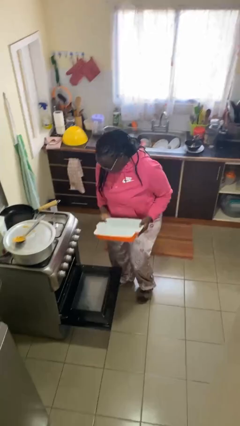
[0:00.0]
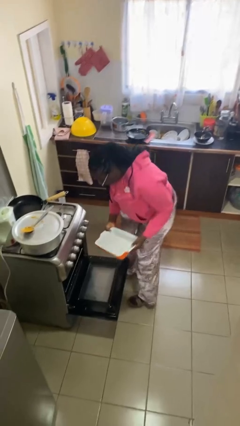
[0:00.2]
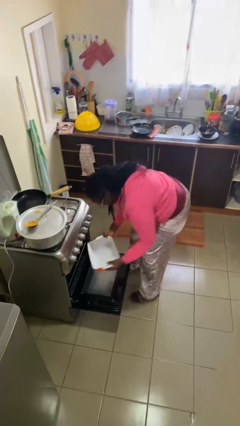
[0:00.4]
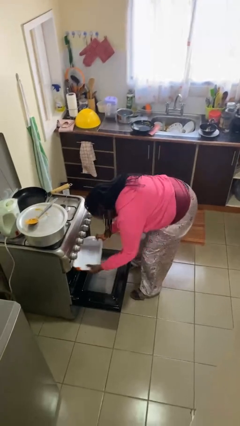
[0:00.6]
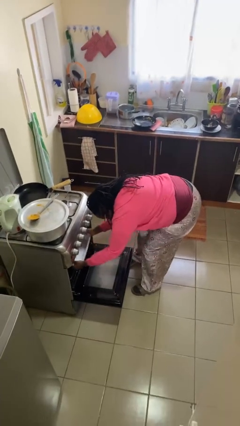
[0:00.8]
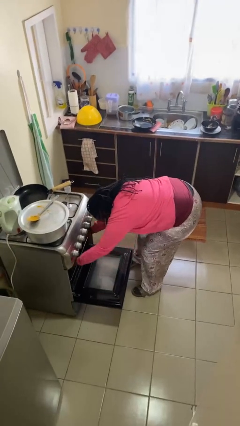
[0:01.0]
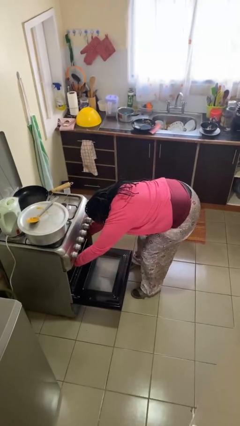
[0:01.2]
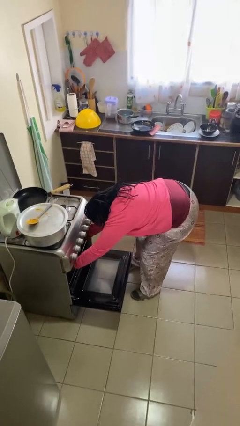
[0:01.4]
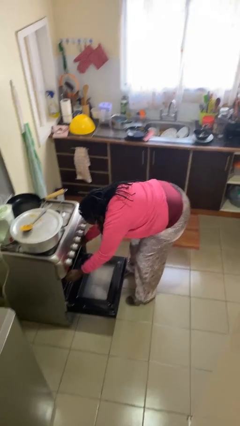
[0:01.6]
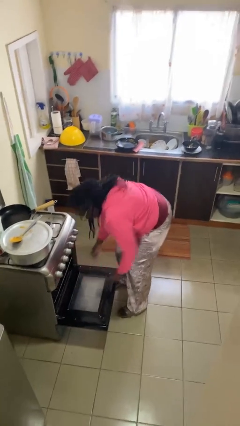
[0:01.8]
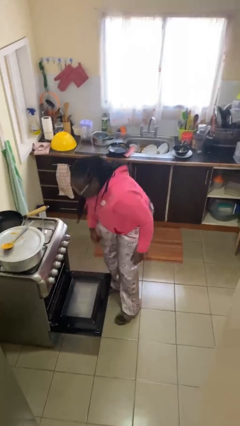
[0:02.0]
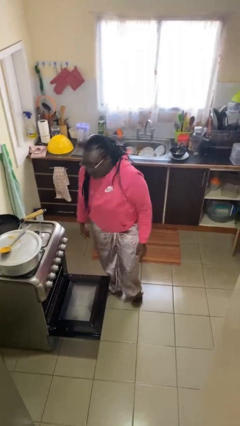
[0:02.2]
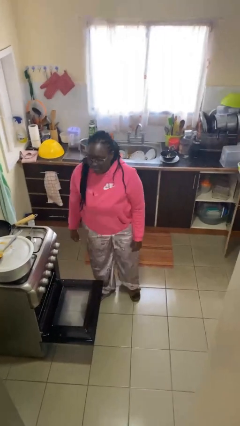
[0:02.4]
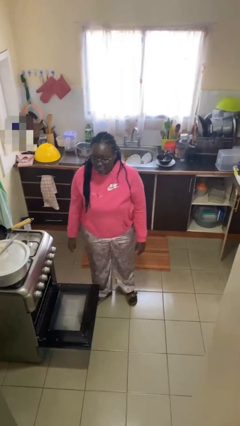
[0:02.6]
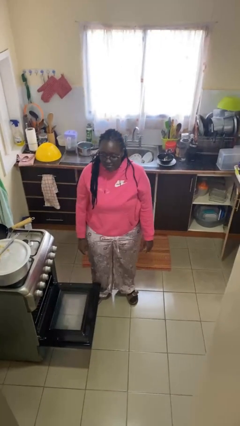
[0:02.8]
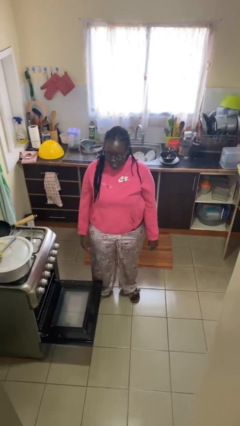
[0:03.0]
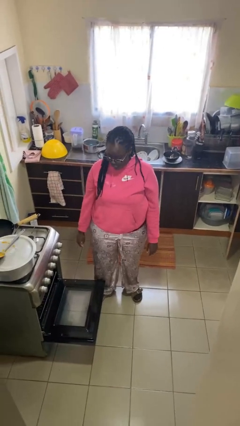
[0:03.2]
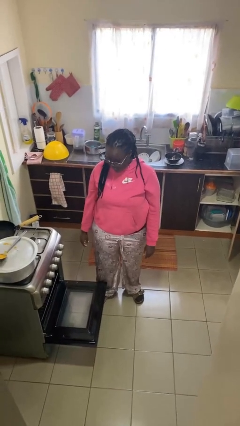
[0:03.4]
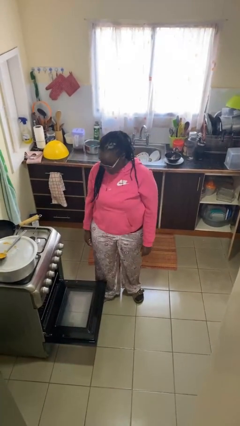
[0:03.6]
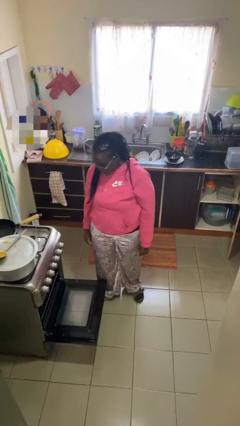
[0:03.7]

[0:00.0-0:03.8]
person puts object into oven

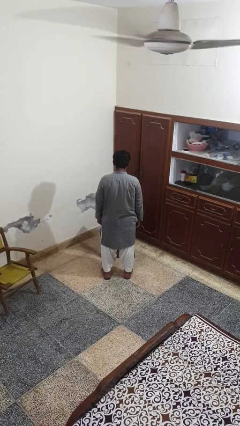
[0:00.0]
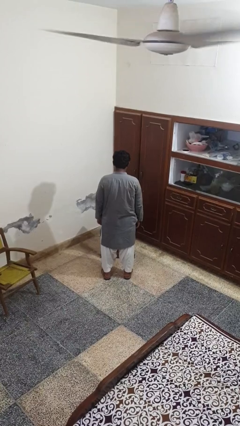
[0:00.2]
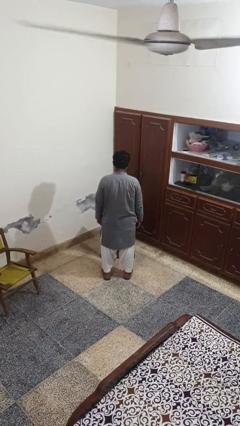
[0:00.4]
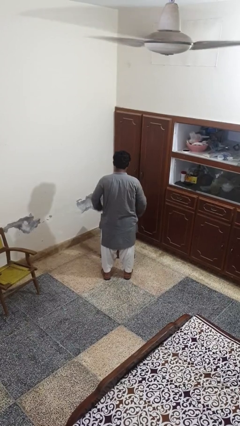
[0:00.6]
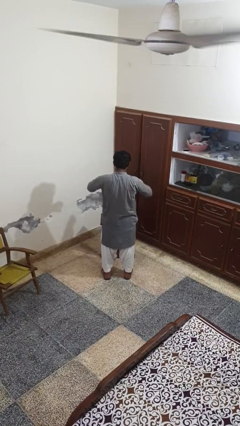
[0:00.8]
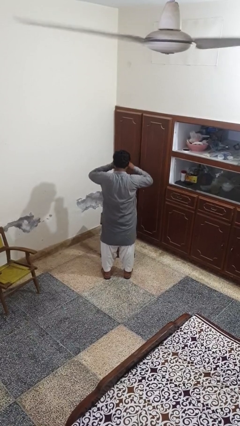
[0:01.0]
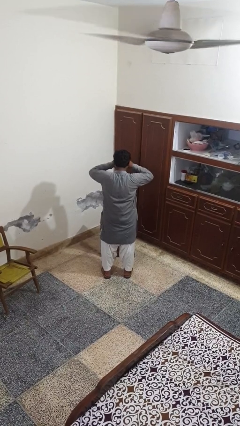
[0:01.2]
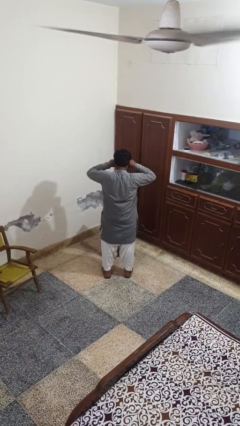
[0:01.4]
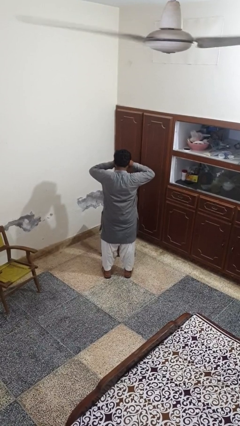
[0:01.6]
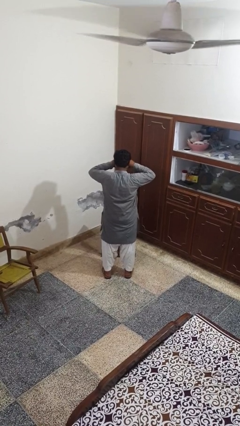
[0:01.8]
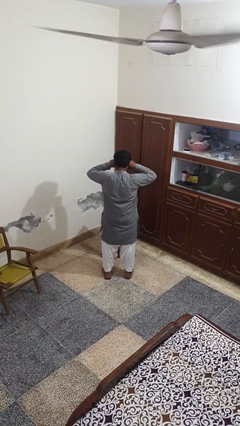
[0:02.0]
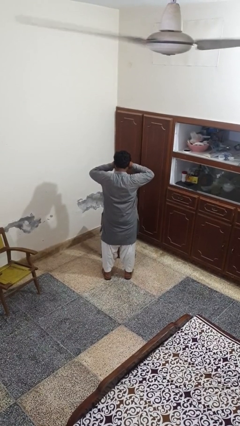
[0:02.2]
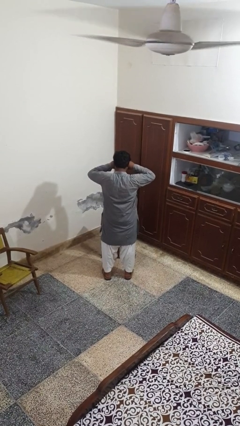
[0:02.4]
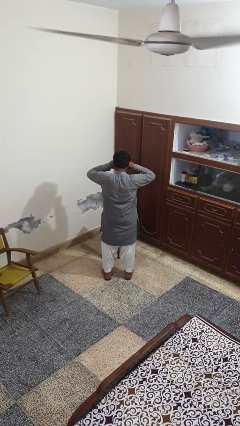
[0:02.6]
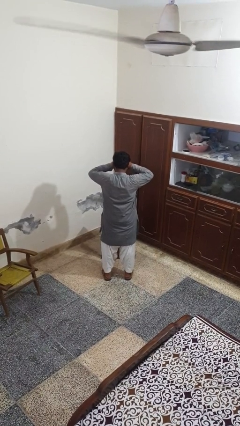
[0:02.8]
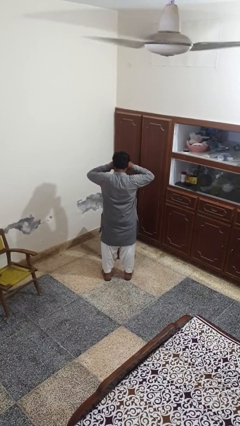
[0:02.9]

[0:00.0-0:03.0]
person rubs eyes

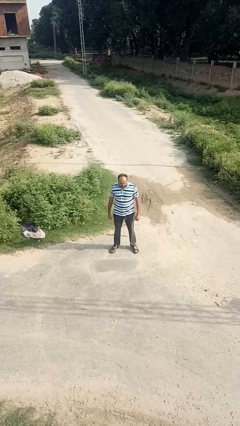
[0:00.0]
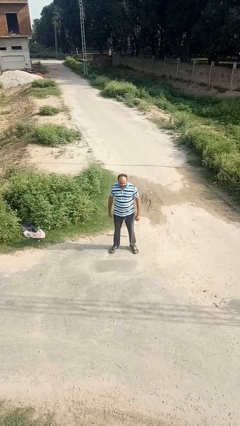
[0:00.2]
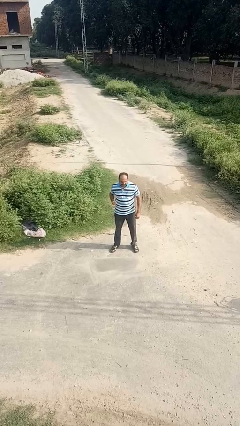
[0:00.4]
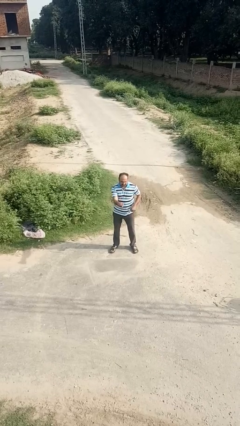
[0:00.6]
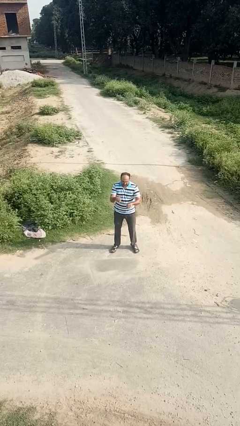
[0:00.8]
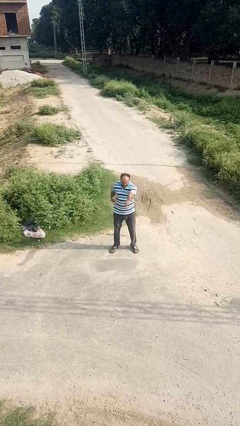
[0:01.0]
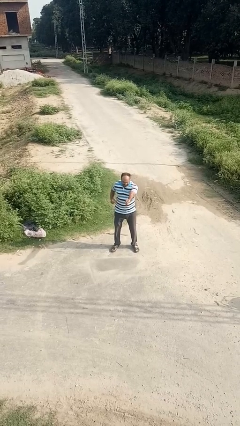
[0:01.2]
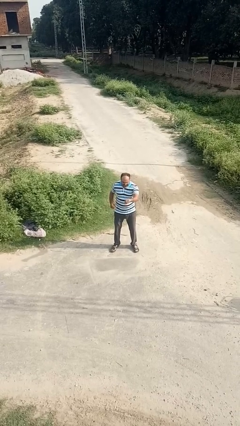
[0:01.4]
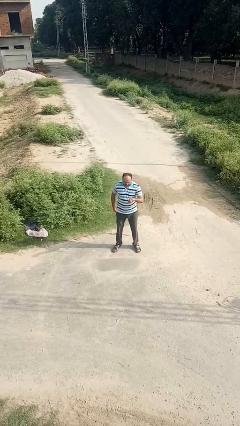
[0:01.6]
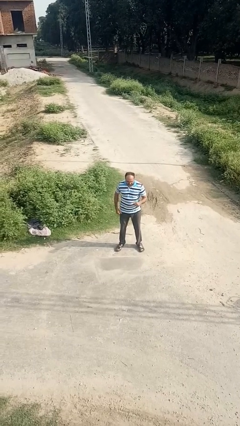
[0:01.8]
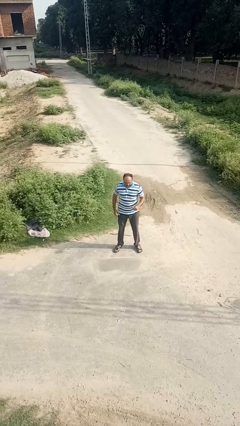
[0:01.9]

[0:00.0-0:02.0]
person punches

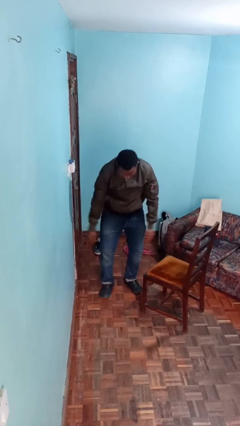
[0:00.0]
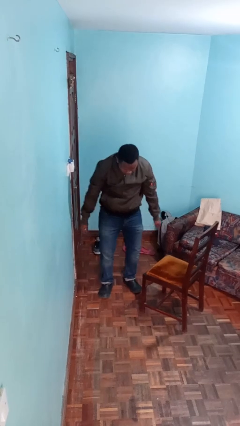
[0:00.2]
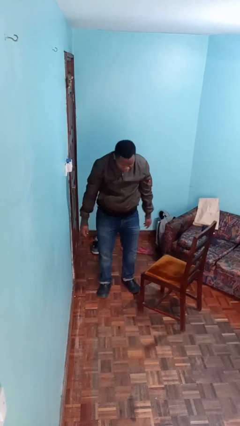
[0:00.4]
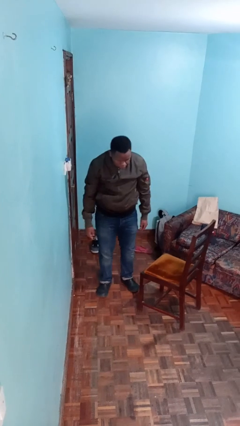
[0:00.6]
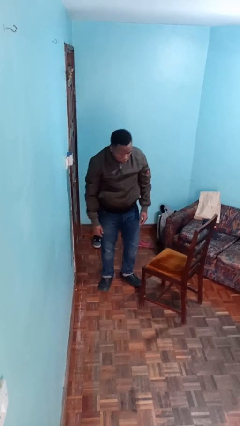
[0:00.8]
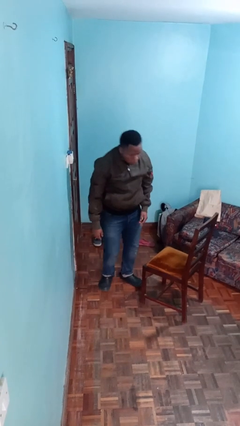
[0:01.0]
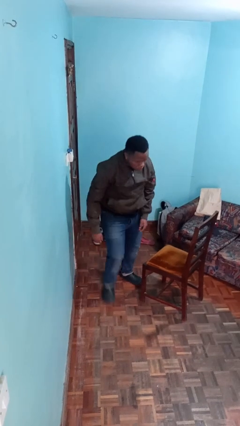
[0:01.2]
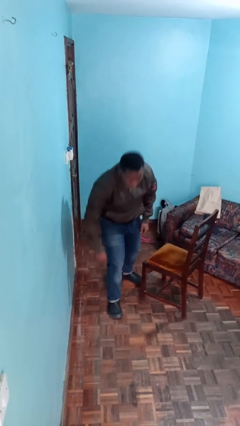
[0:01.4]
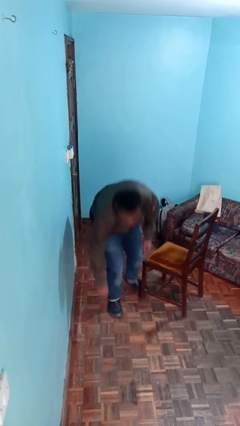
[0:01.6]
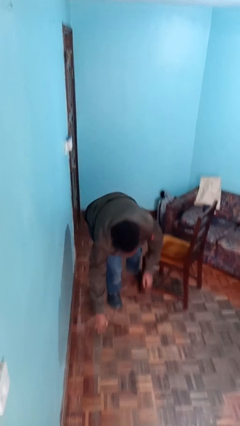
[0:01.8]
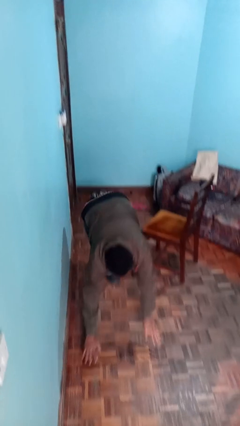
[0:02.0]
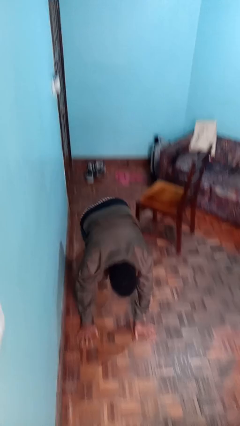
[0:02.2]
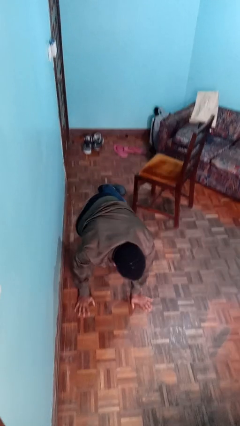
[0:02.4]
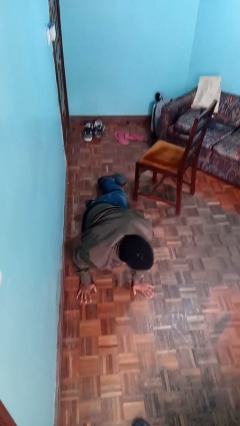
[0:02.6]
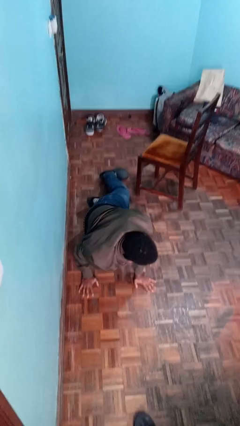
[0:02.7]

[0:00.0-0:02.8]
person trips on object on floor

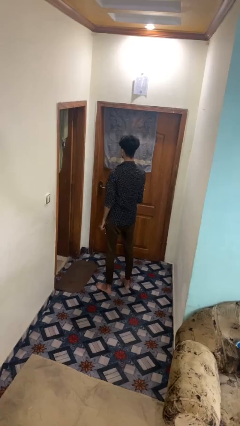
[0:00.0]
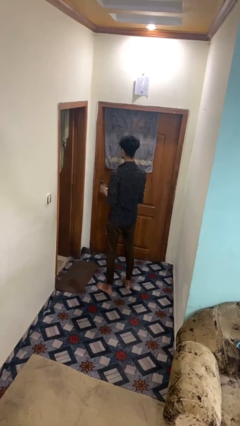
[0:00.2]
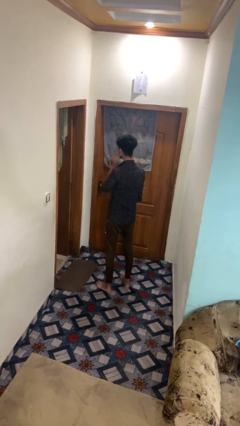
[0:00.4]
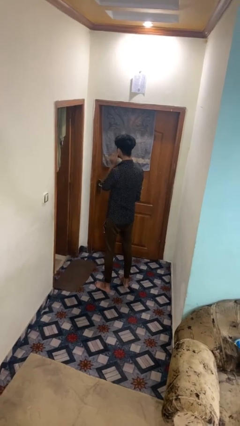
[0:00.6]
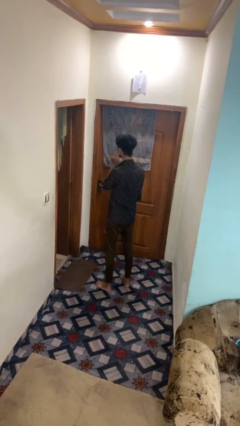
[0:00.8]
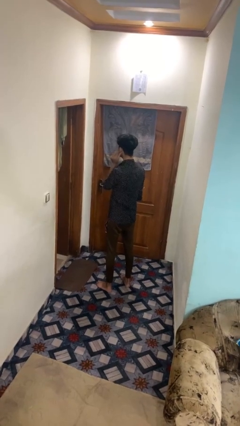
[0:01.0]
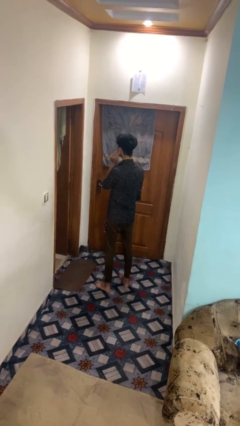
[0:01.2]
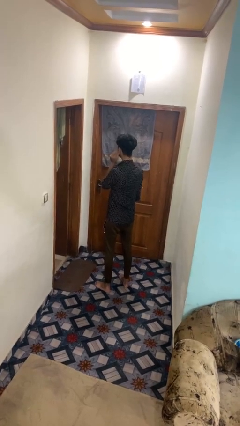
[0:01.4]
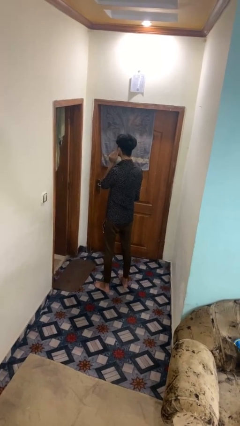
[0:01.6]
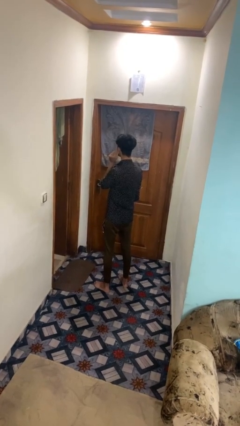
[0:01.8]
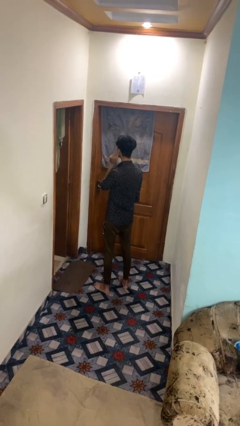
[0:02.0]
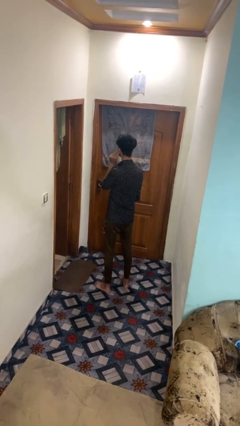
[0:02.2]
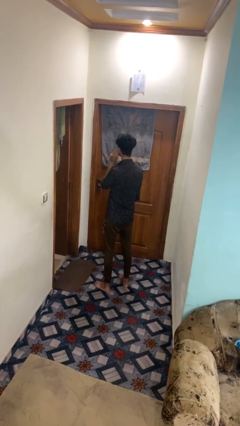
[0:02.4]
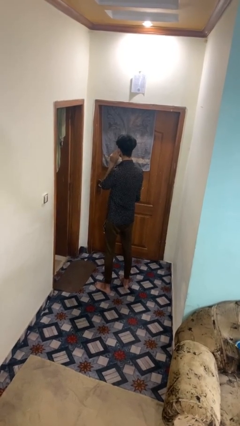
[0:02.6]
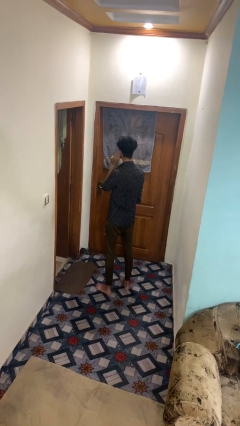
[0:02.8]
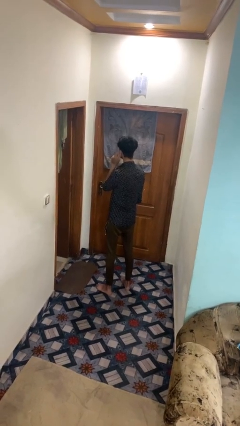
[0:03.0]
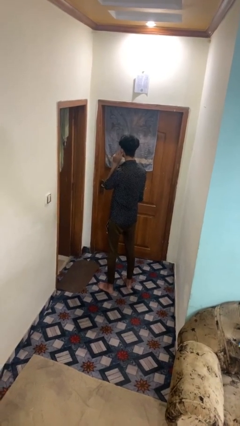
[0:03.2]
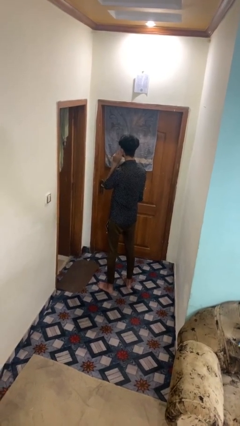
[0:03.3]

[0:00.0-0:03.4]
person touches earlobe

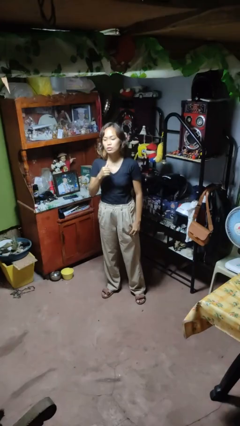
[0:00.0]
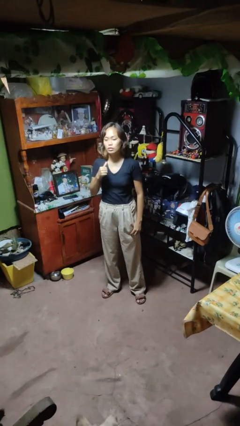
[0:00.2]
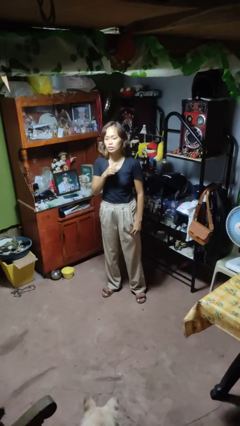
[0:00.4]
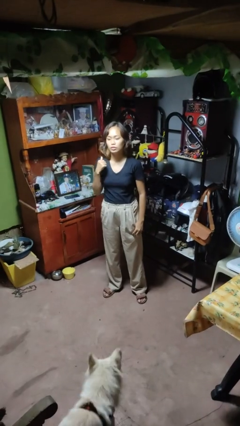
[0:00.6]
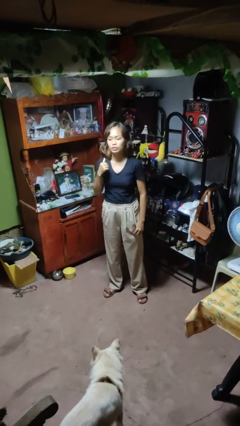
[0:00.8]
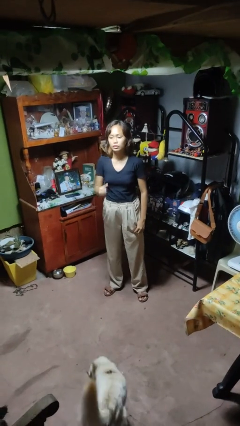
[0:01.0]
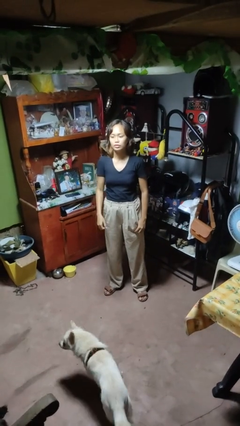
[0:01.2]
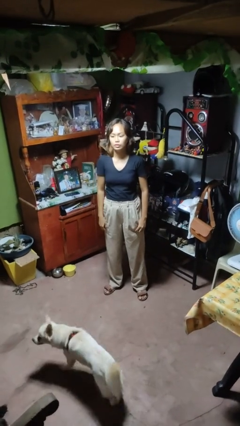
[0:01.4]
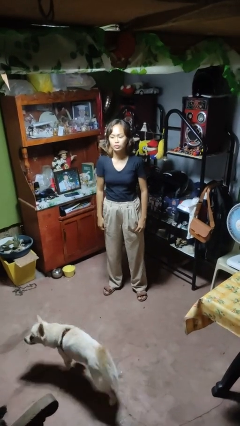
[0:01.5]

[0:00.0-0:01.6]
person gestures cut
